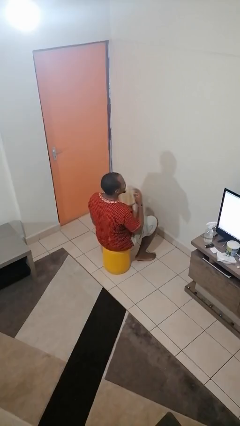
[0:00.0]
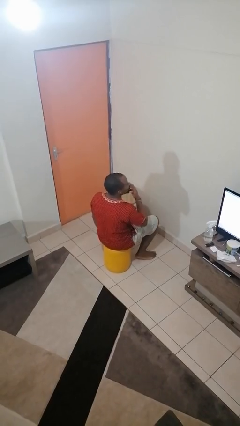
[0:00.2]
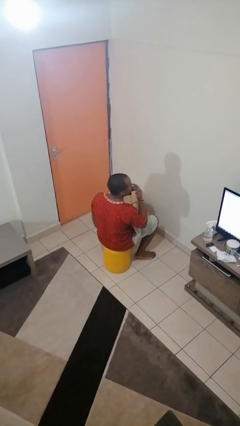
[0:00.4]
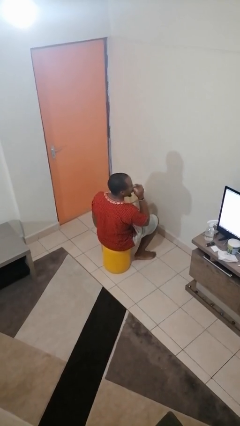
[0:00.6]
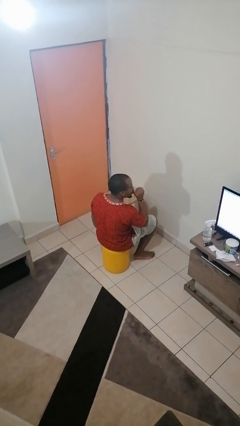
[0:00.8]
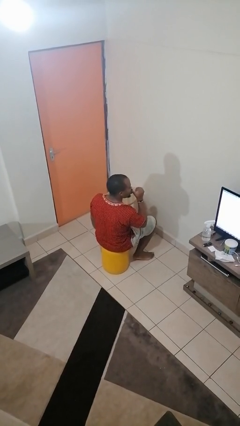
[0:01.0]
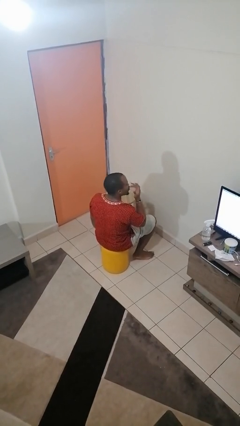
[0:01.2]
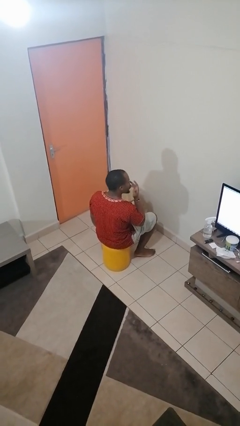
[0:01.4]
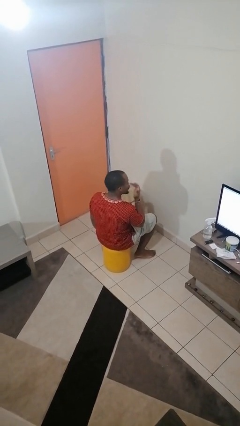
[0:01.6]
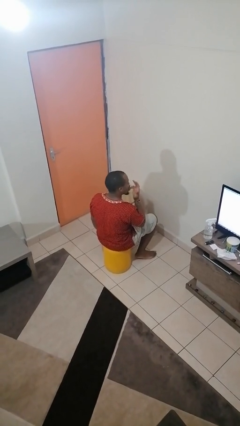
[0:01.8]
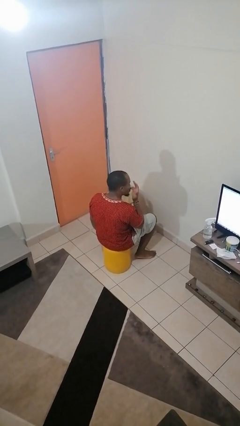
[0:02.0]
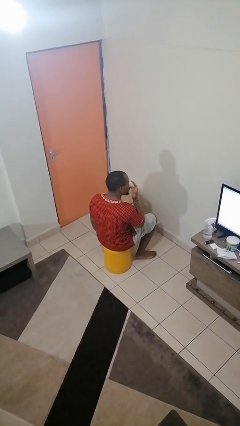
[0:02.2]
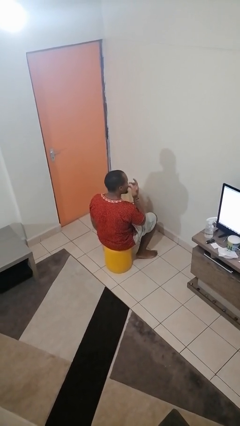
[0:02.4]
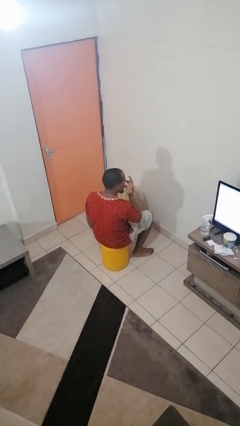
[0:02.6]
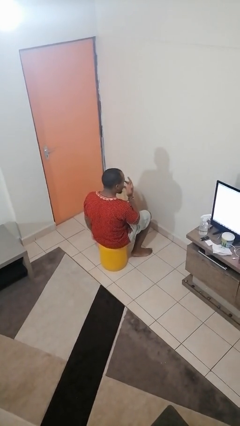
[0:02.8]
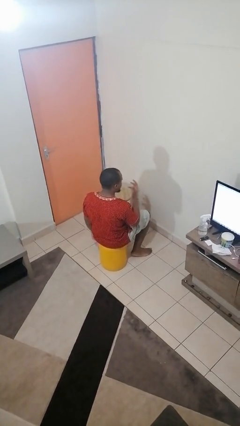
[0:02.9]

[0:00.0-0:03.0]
person licks fingers

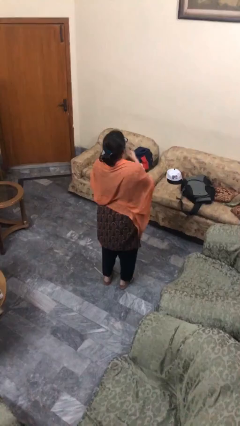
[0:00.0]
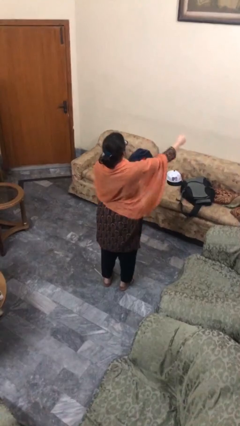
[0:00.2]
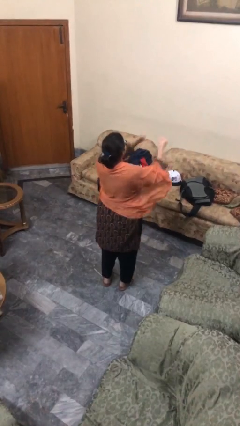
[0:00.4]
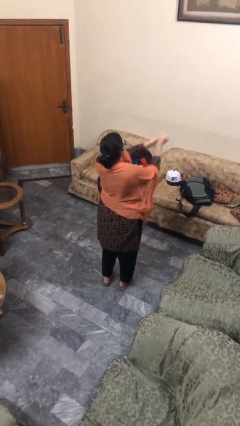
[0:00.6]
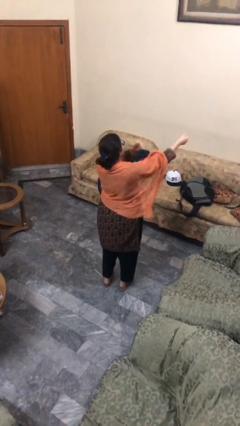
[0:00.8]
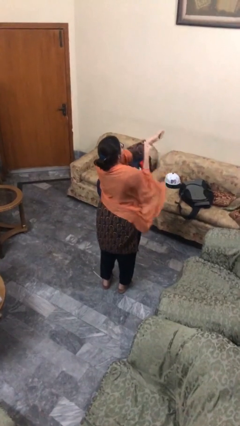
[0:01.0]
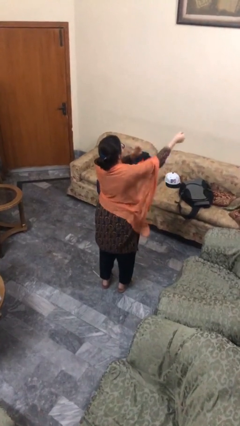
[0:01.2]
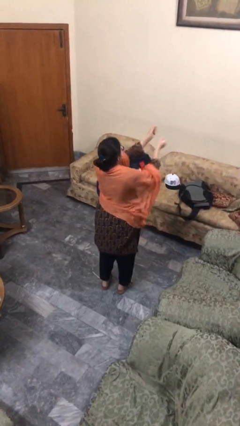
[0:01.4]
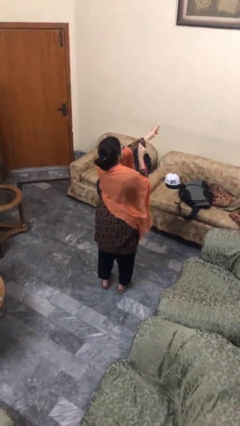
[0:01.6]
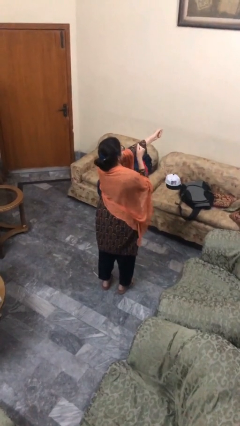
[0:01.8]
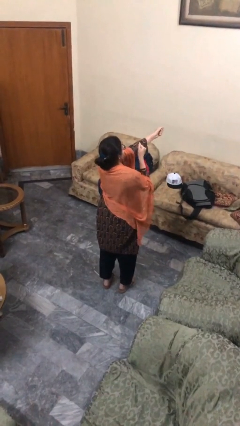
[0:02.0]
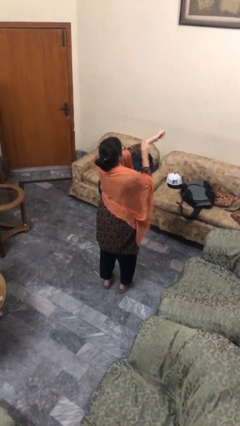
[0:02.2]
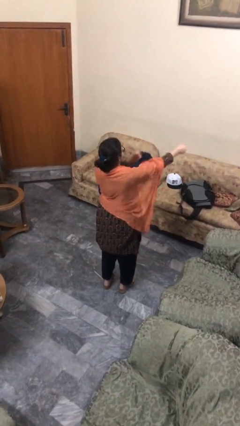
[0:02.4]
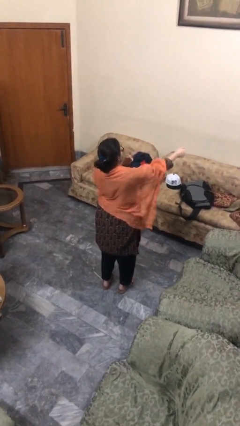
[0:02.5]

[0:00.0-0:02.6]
person punches

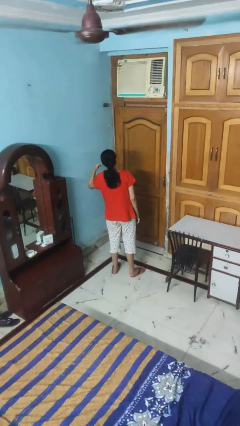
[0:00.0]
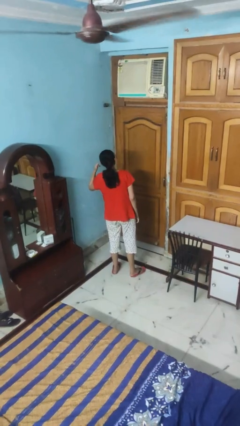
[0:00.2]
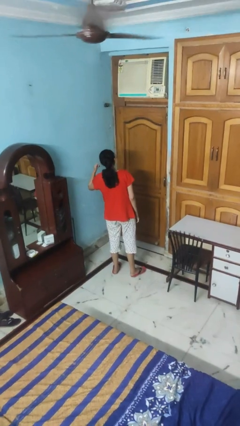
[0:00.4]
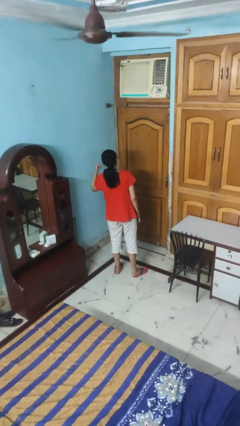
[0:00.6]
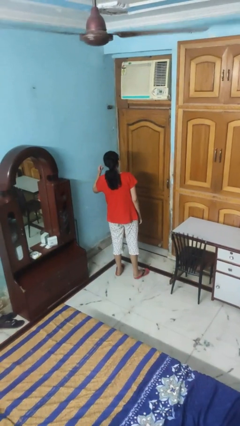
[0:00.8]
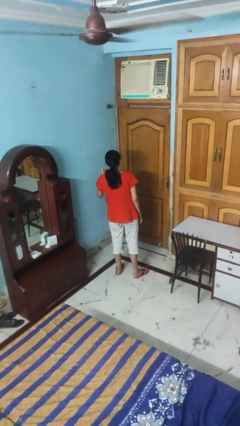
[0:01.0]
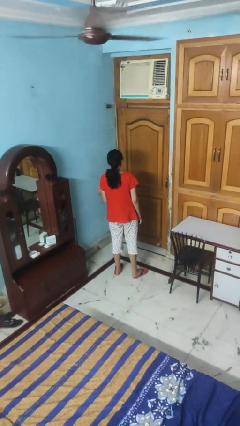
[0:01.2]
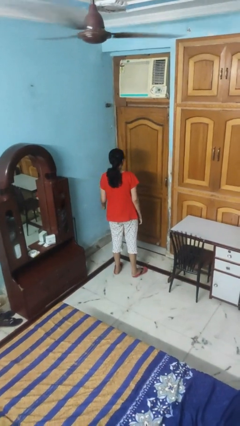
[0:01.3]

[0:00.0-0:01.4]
person gestures listen closely

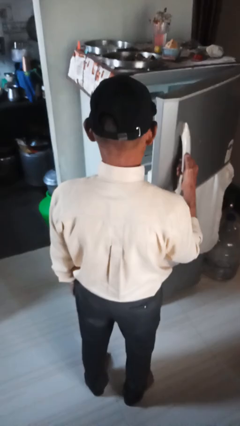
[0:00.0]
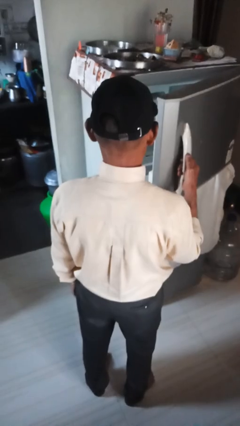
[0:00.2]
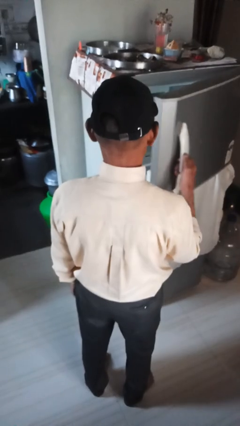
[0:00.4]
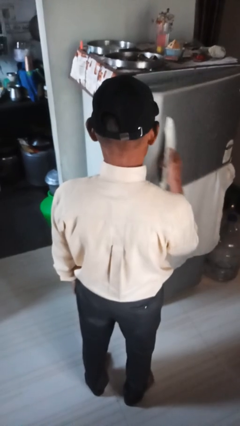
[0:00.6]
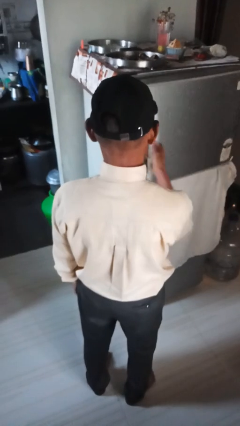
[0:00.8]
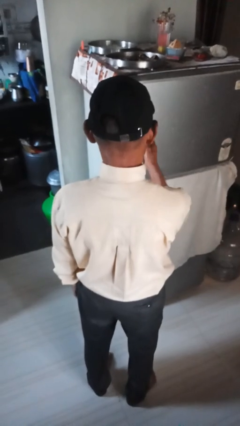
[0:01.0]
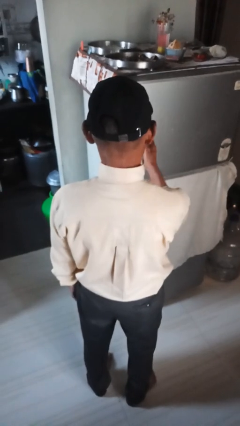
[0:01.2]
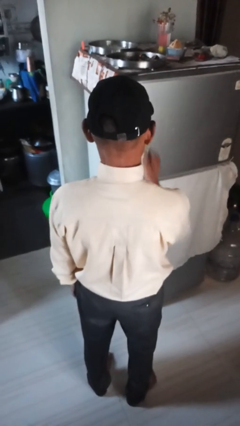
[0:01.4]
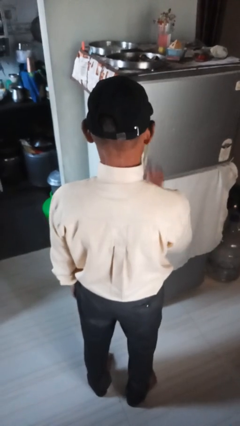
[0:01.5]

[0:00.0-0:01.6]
person closes clothes washer

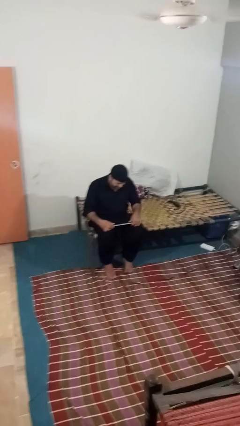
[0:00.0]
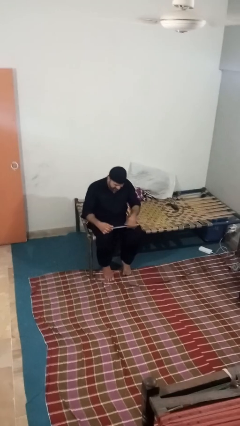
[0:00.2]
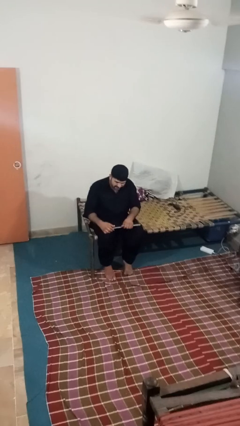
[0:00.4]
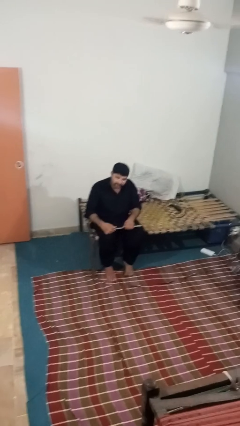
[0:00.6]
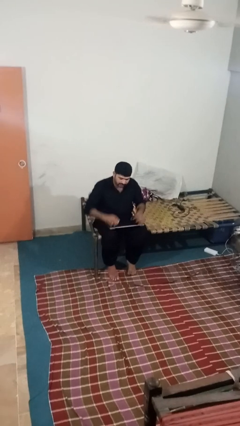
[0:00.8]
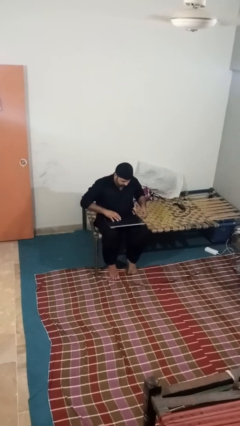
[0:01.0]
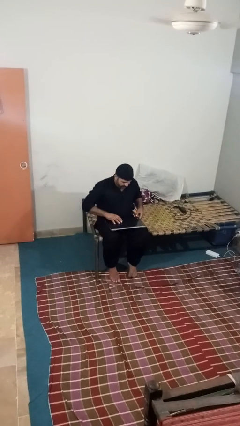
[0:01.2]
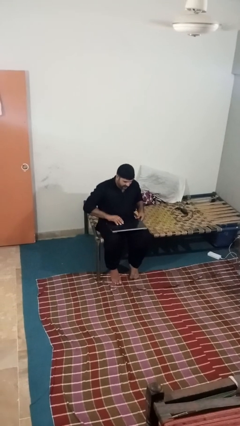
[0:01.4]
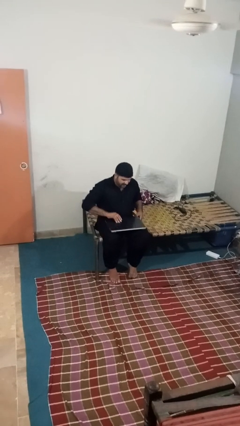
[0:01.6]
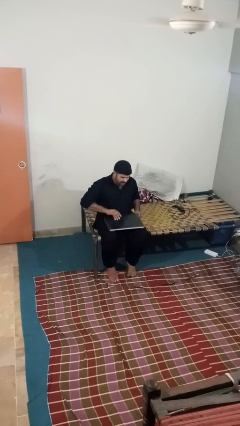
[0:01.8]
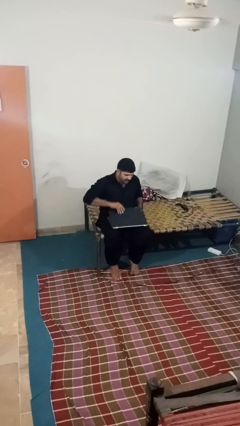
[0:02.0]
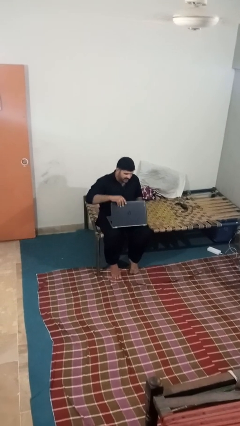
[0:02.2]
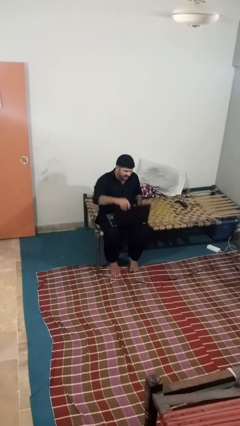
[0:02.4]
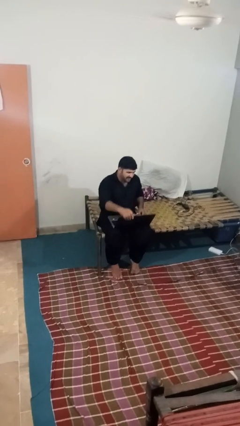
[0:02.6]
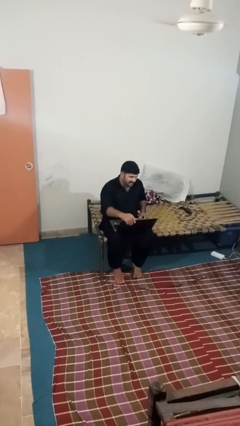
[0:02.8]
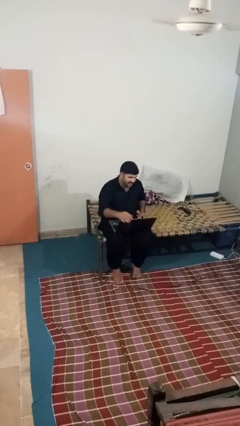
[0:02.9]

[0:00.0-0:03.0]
person opens laptop

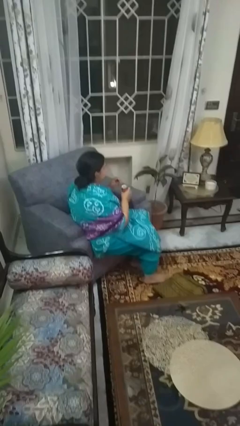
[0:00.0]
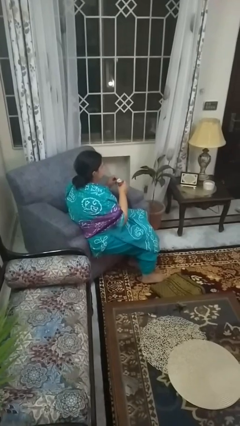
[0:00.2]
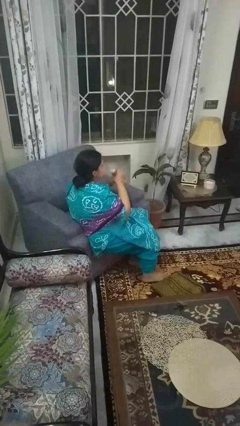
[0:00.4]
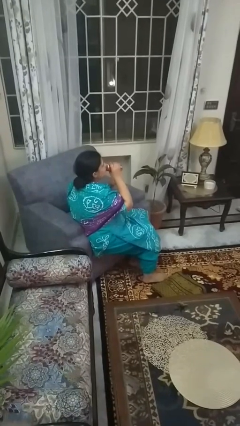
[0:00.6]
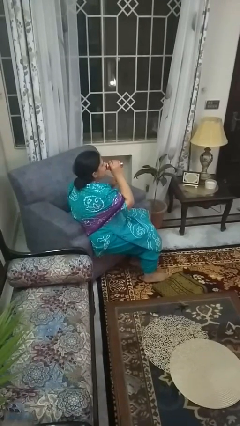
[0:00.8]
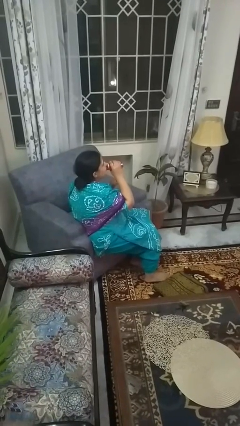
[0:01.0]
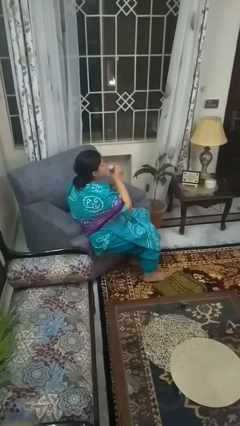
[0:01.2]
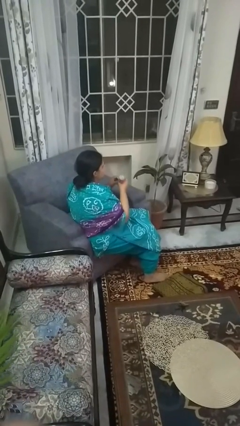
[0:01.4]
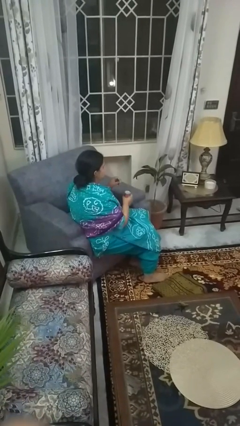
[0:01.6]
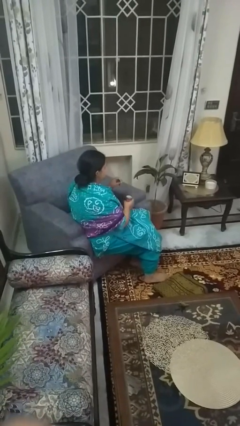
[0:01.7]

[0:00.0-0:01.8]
person drinks from beverage can

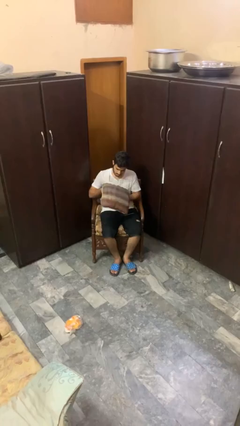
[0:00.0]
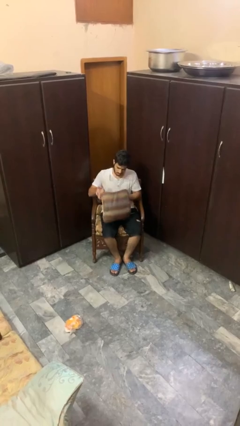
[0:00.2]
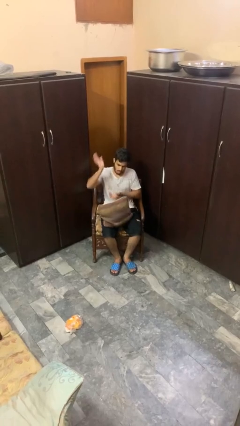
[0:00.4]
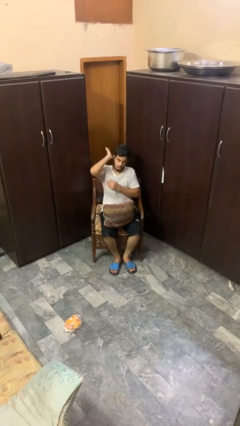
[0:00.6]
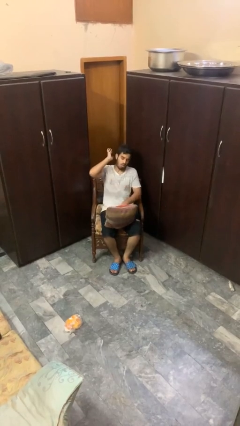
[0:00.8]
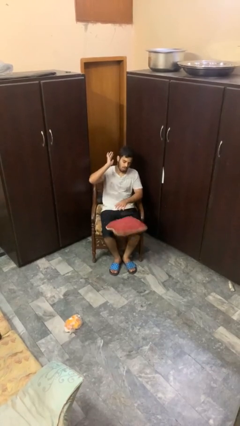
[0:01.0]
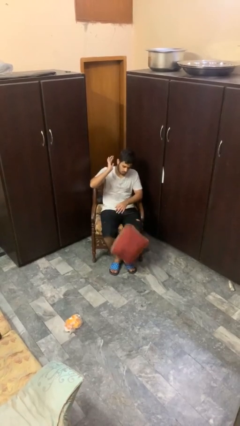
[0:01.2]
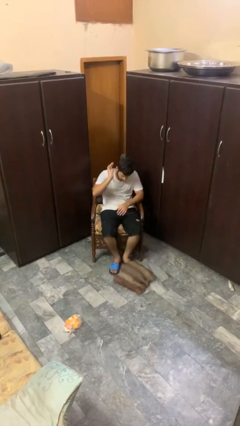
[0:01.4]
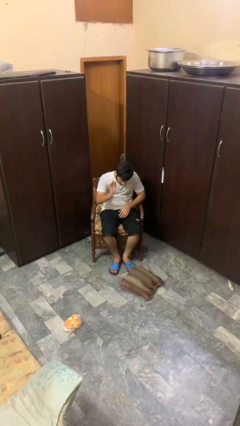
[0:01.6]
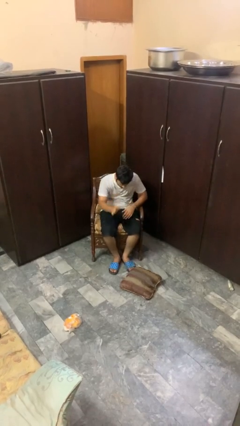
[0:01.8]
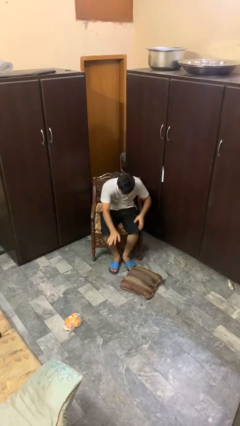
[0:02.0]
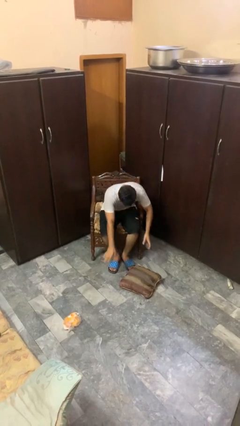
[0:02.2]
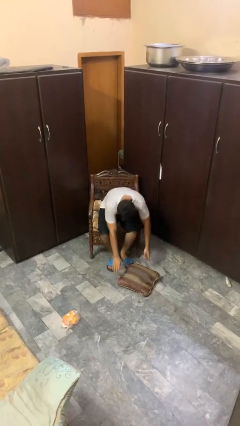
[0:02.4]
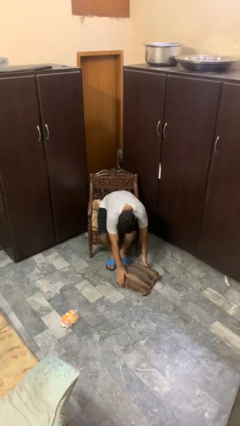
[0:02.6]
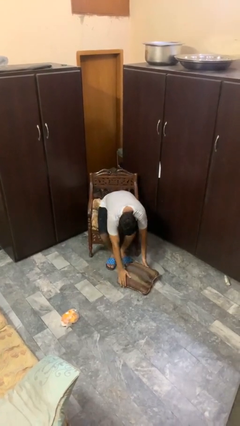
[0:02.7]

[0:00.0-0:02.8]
person drops object

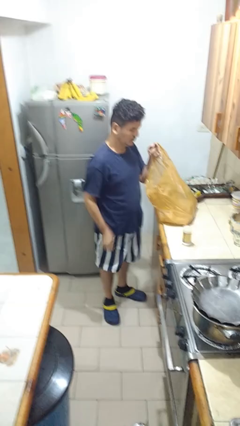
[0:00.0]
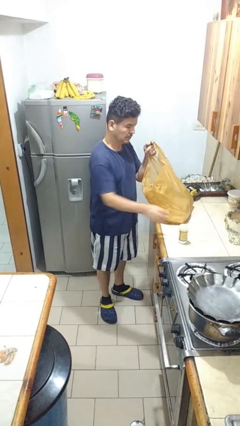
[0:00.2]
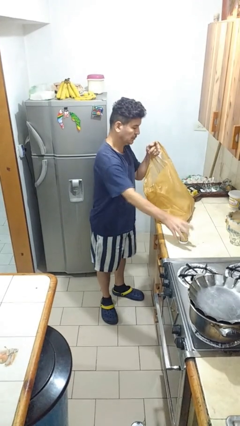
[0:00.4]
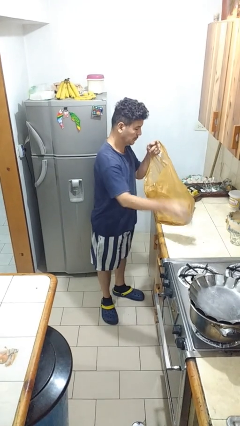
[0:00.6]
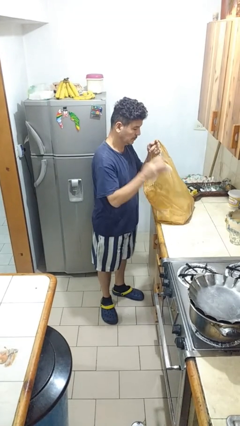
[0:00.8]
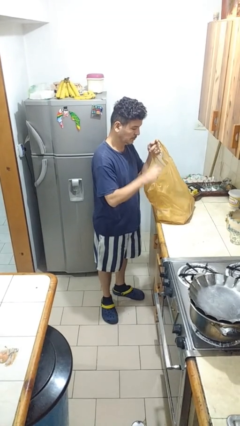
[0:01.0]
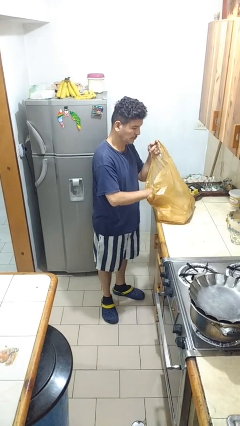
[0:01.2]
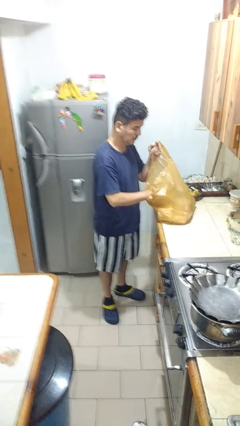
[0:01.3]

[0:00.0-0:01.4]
person puts object into bag
